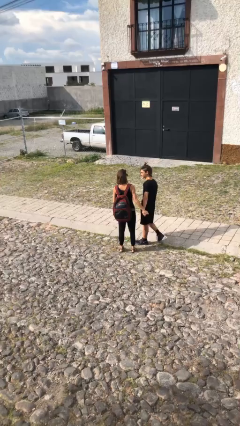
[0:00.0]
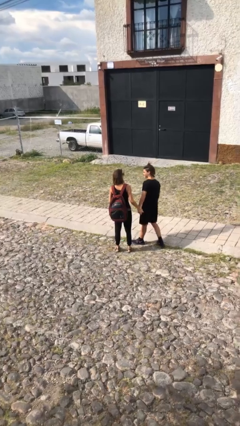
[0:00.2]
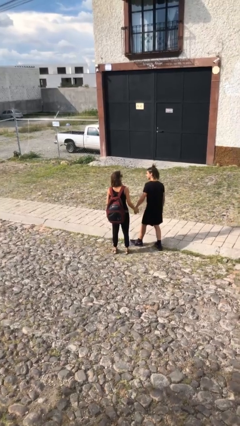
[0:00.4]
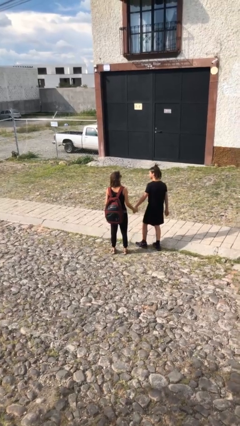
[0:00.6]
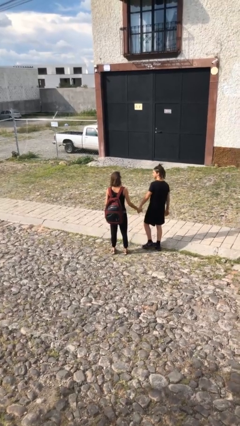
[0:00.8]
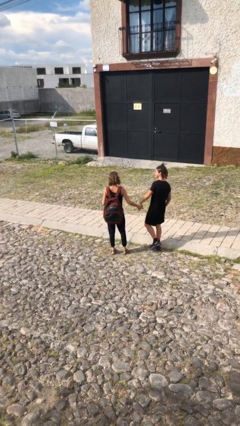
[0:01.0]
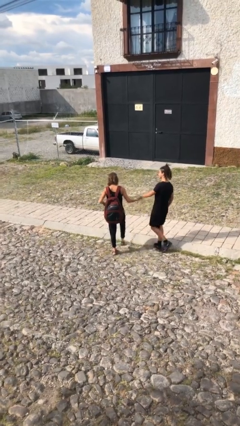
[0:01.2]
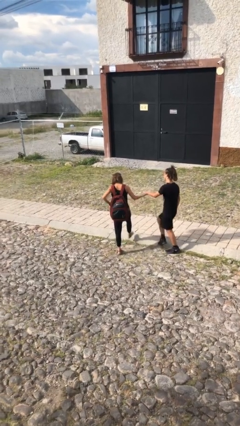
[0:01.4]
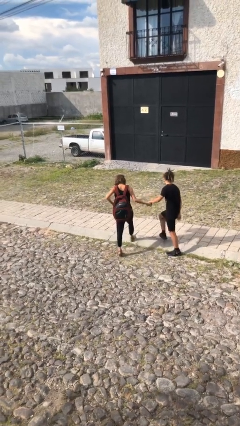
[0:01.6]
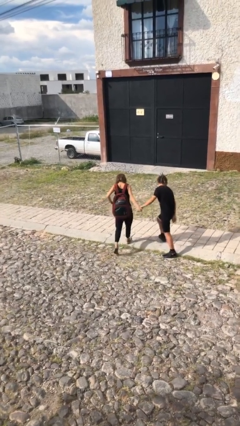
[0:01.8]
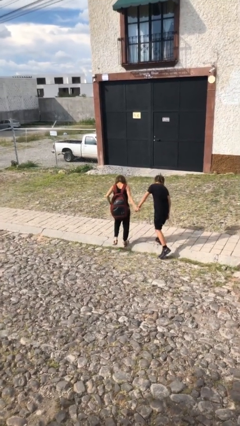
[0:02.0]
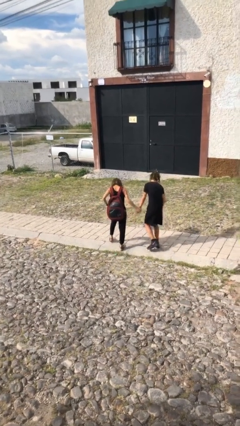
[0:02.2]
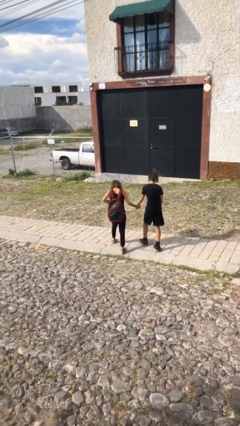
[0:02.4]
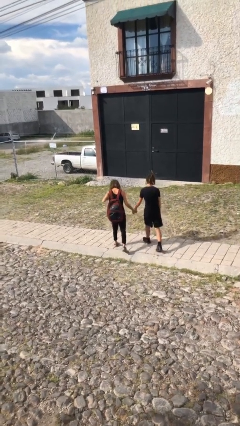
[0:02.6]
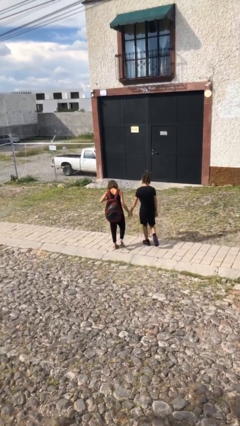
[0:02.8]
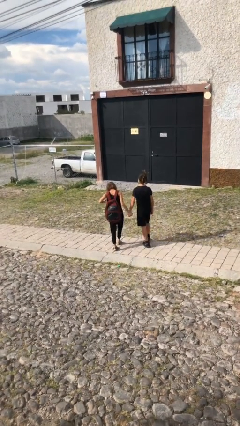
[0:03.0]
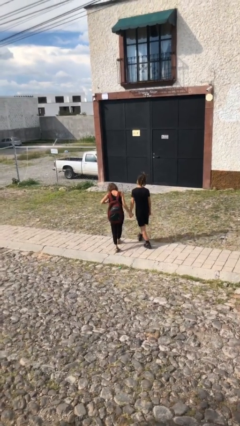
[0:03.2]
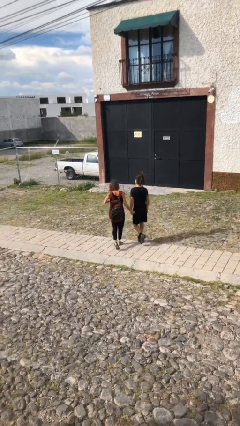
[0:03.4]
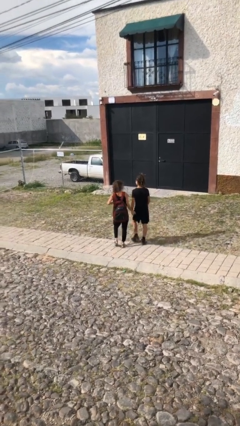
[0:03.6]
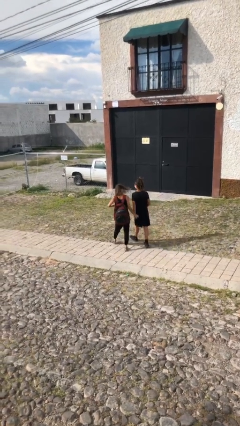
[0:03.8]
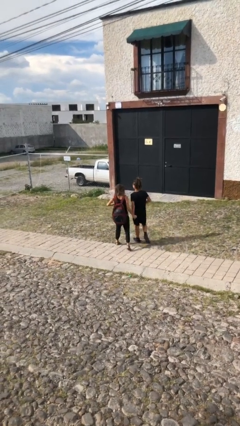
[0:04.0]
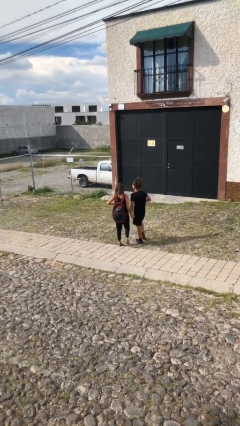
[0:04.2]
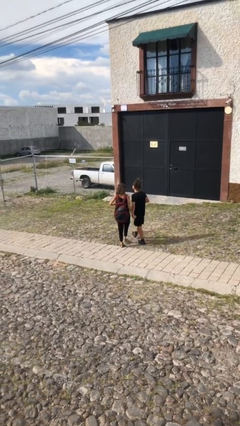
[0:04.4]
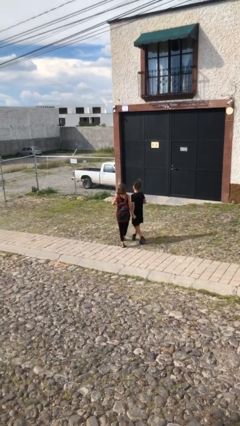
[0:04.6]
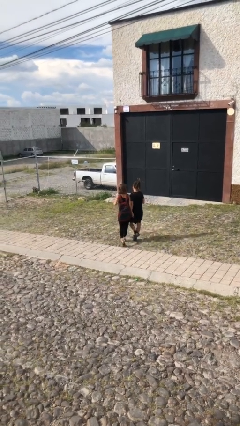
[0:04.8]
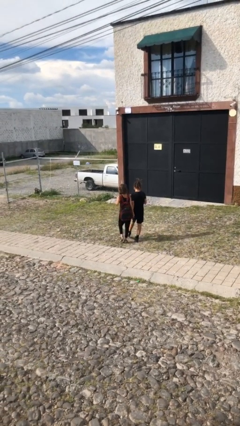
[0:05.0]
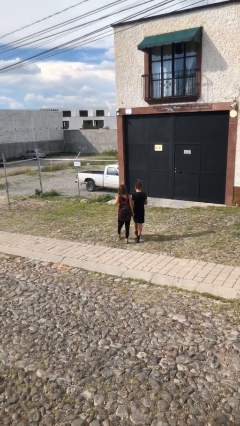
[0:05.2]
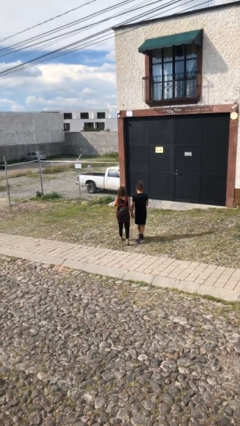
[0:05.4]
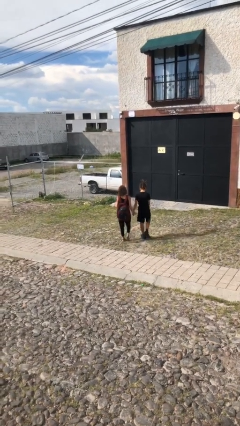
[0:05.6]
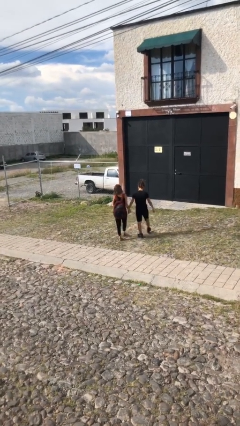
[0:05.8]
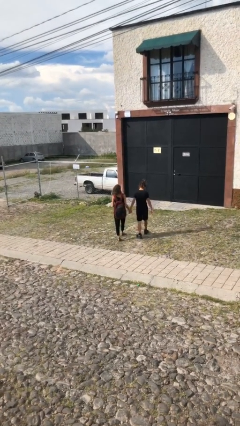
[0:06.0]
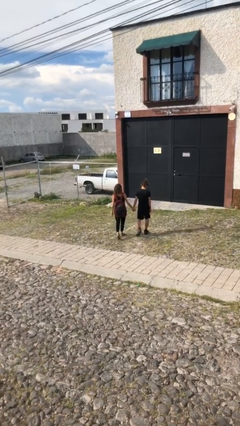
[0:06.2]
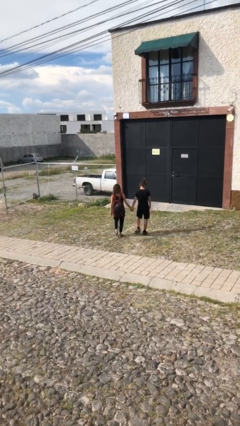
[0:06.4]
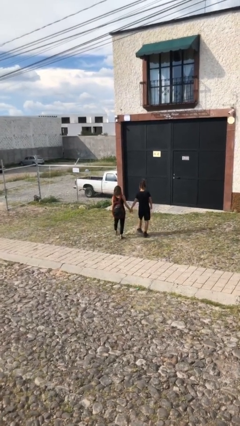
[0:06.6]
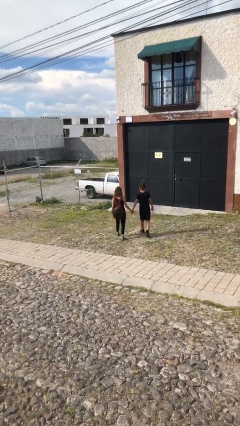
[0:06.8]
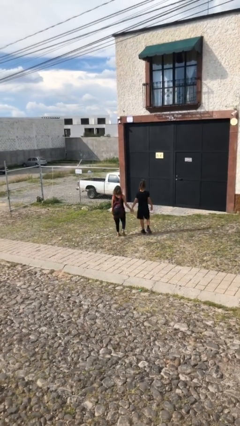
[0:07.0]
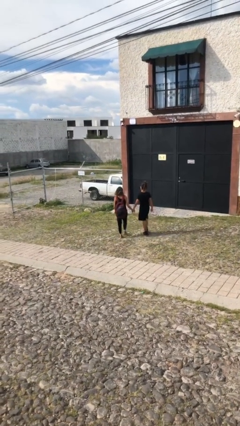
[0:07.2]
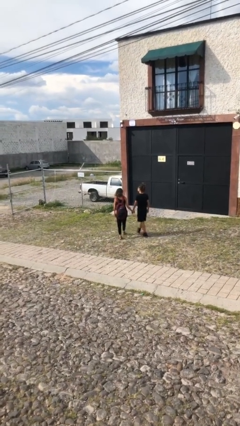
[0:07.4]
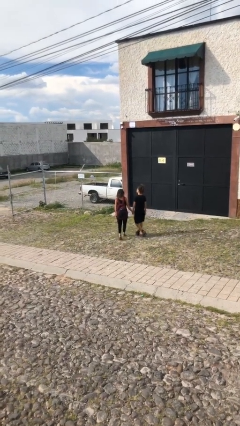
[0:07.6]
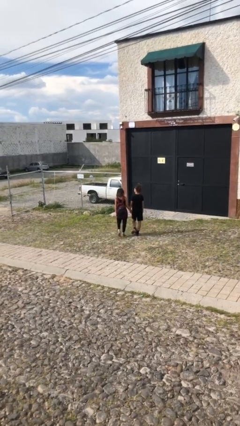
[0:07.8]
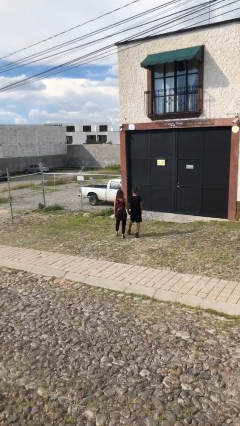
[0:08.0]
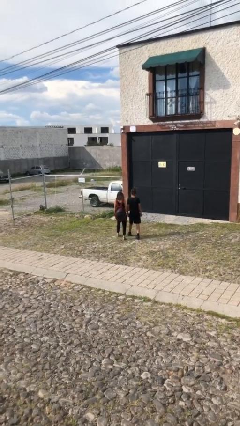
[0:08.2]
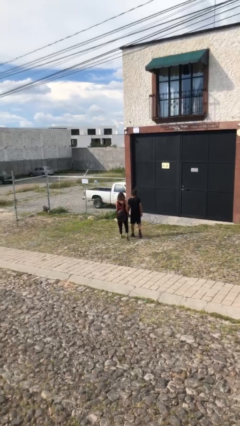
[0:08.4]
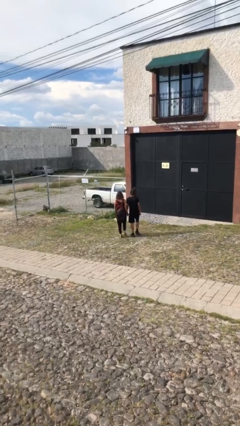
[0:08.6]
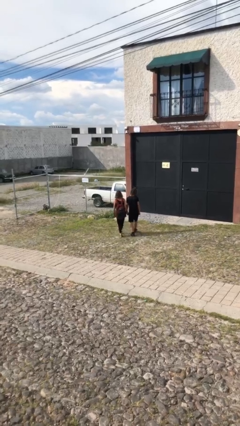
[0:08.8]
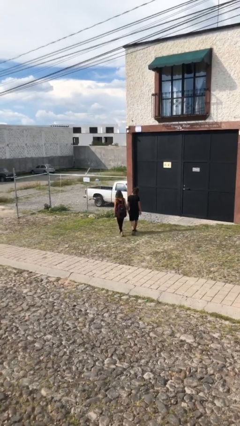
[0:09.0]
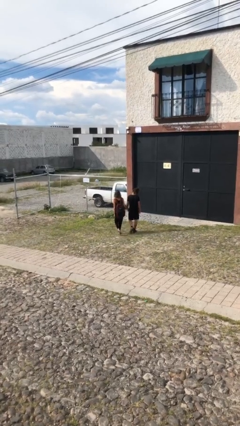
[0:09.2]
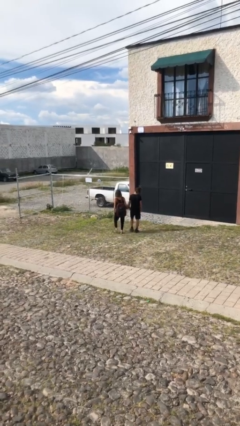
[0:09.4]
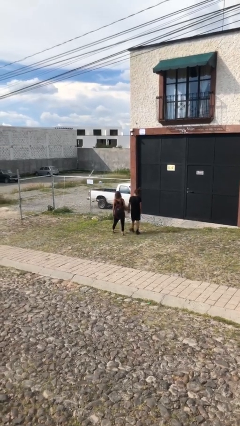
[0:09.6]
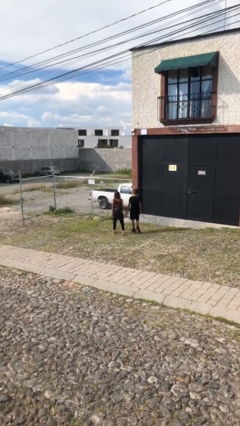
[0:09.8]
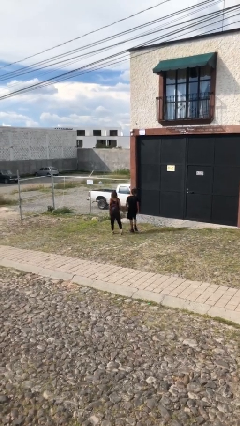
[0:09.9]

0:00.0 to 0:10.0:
person holds hand

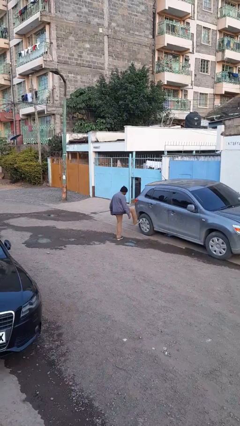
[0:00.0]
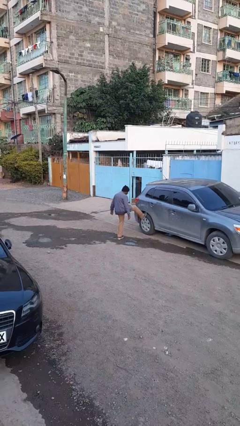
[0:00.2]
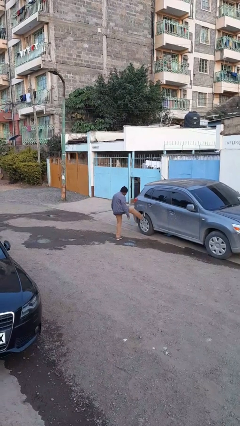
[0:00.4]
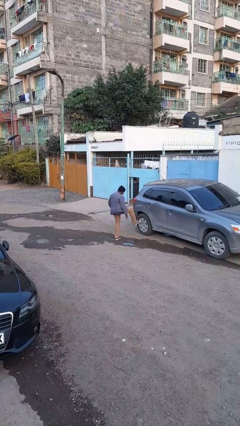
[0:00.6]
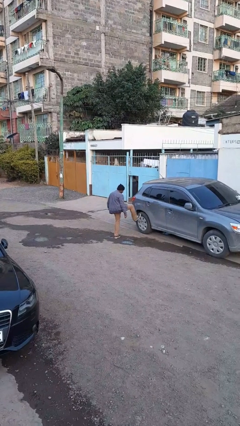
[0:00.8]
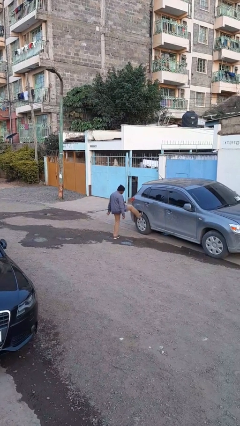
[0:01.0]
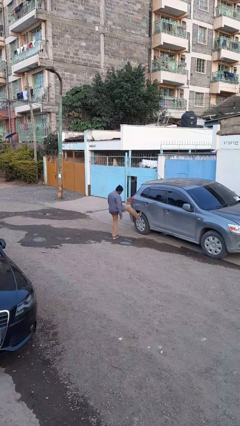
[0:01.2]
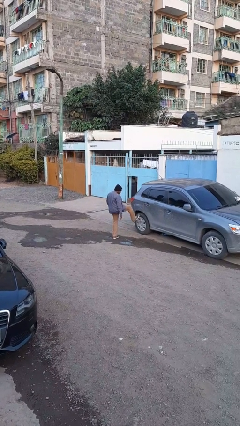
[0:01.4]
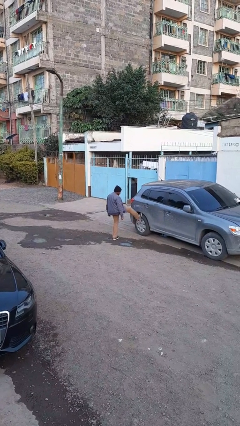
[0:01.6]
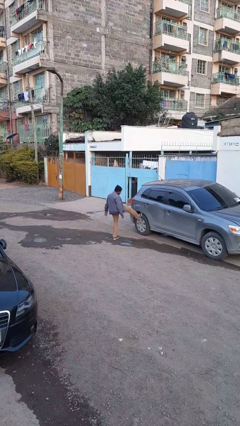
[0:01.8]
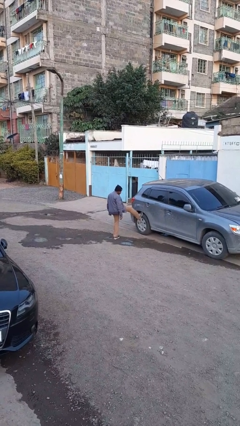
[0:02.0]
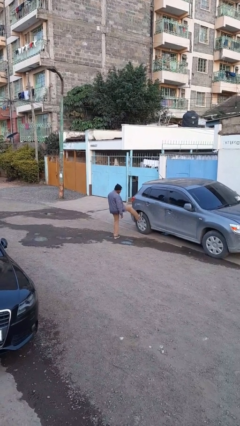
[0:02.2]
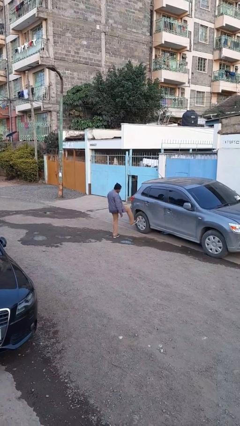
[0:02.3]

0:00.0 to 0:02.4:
person kicks car tires

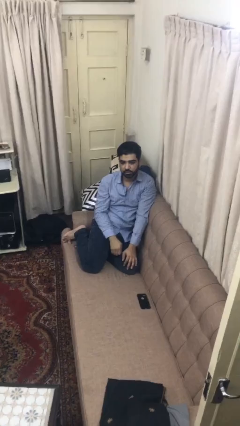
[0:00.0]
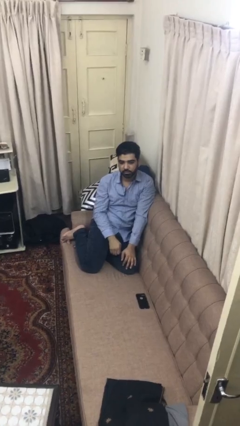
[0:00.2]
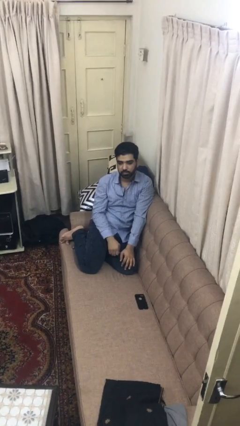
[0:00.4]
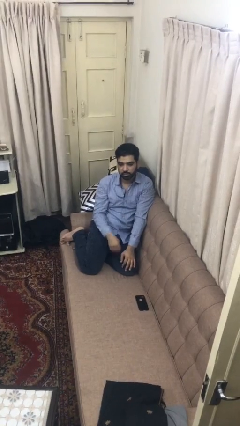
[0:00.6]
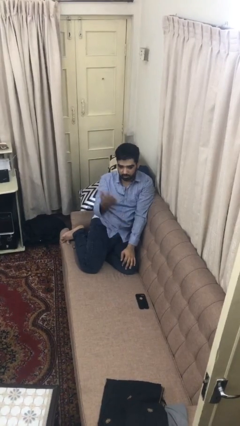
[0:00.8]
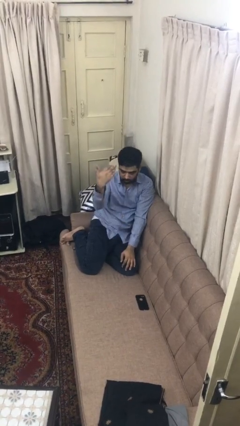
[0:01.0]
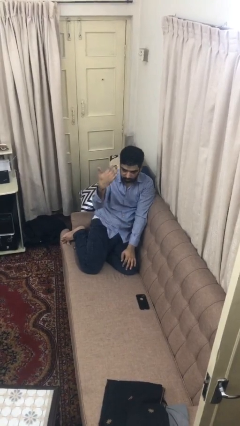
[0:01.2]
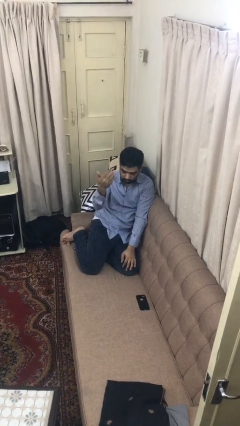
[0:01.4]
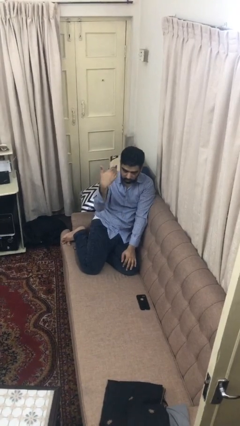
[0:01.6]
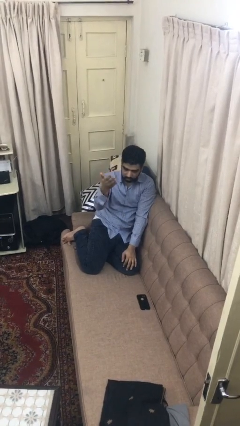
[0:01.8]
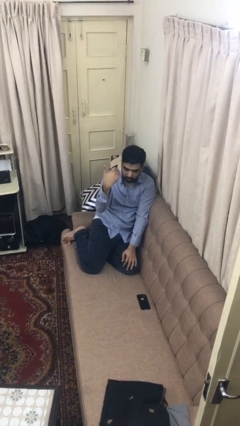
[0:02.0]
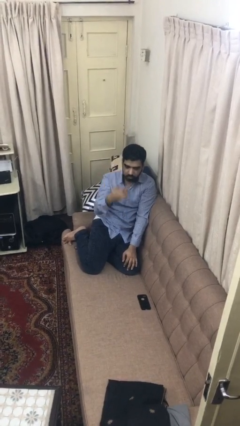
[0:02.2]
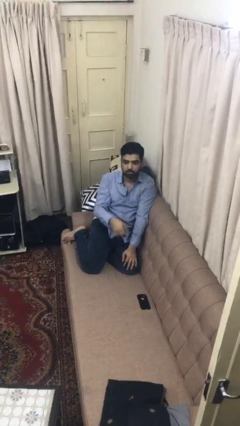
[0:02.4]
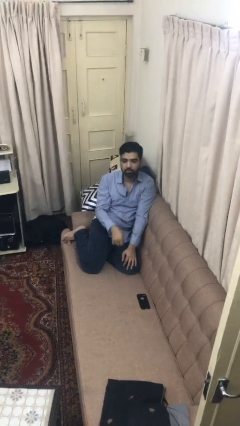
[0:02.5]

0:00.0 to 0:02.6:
person gestures come here

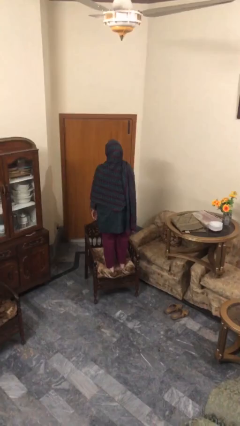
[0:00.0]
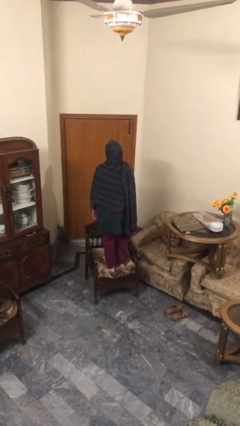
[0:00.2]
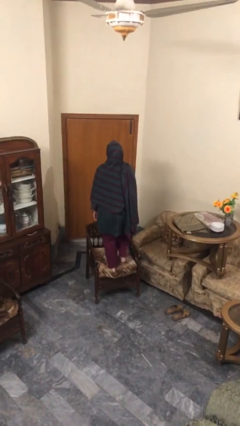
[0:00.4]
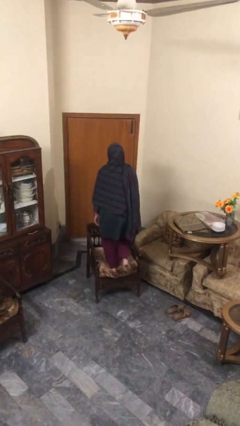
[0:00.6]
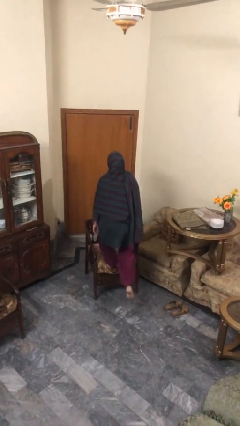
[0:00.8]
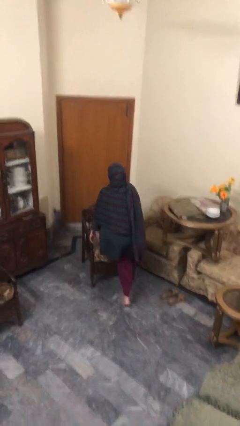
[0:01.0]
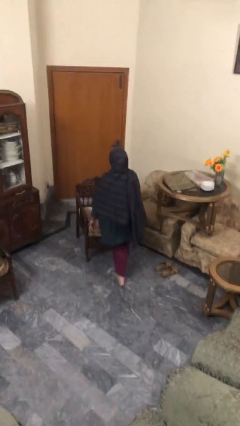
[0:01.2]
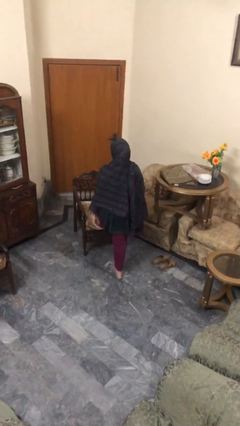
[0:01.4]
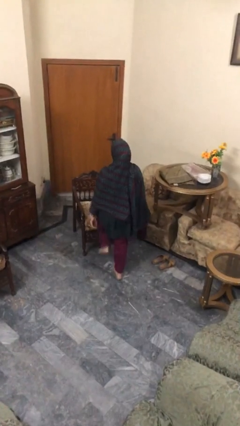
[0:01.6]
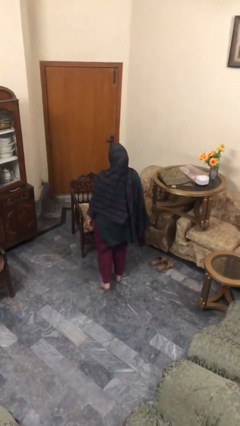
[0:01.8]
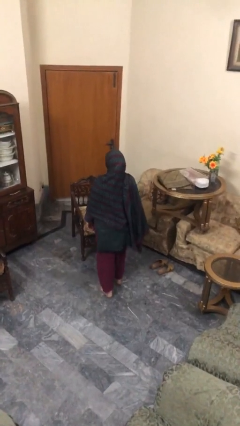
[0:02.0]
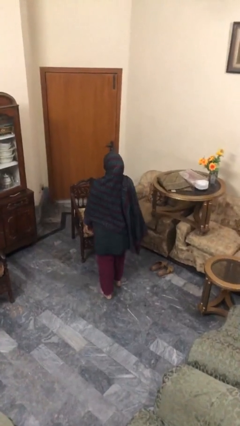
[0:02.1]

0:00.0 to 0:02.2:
person climbs off chair

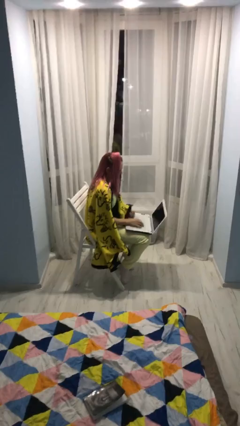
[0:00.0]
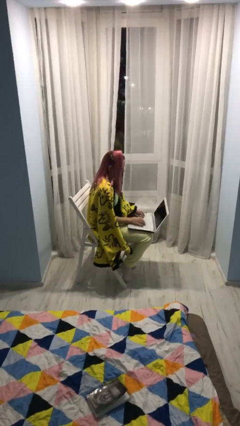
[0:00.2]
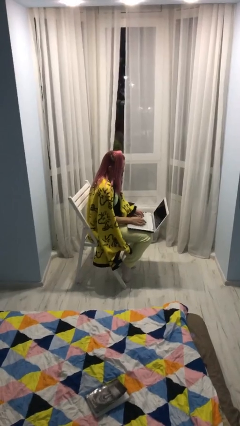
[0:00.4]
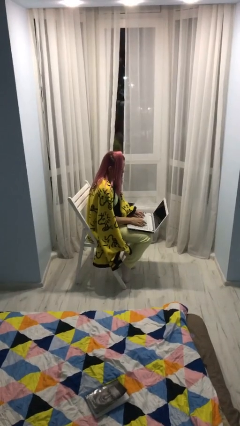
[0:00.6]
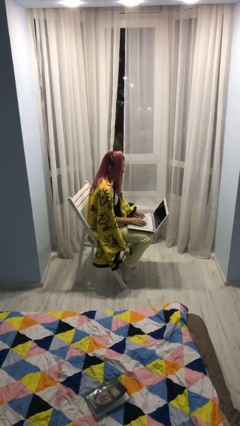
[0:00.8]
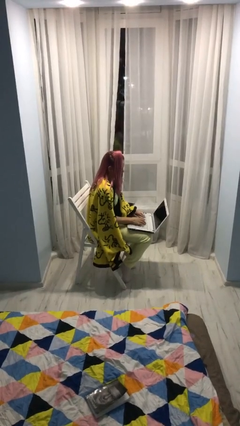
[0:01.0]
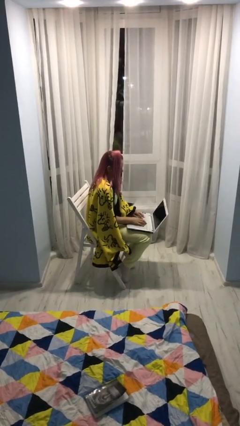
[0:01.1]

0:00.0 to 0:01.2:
person interacts with laptop
